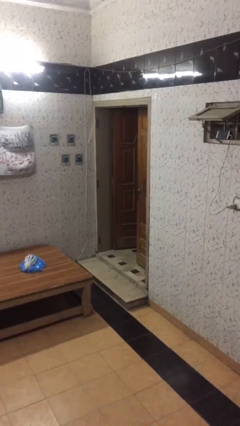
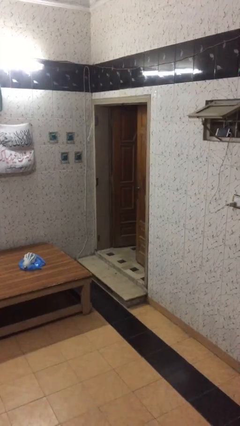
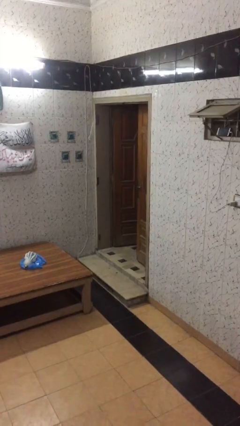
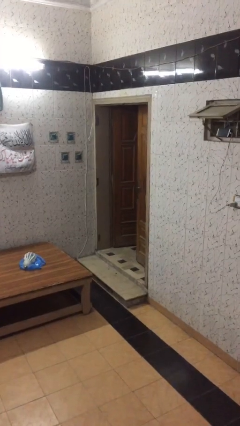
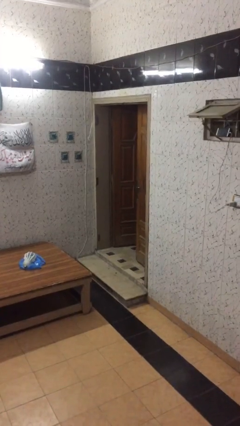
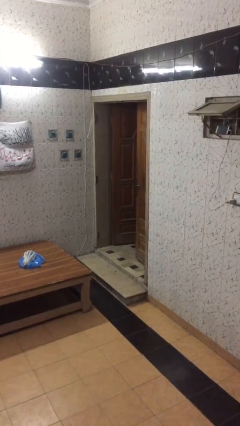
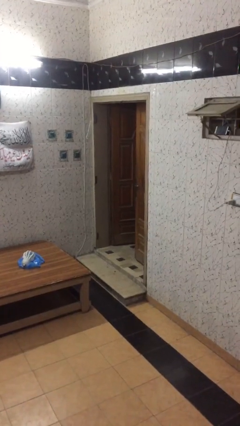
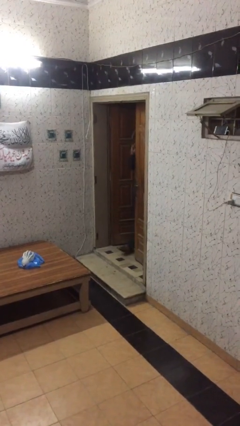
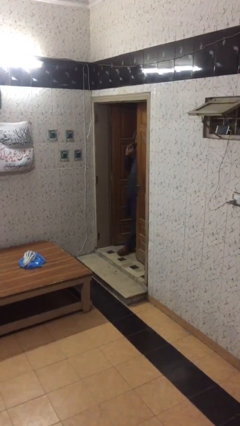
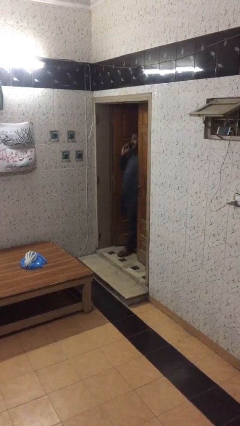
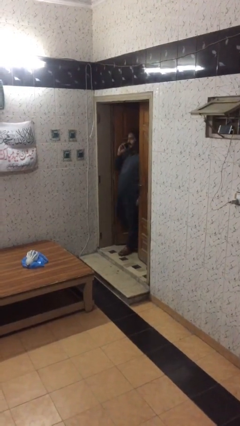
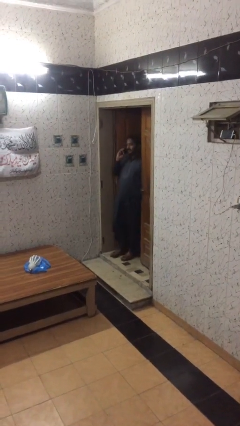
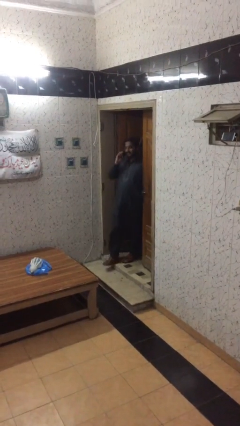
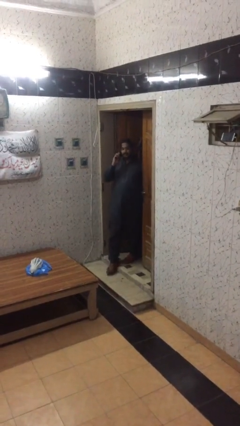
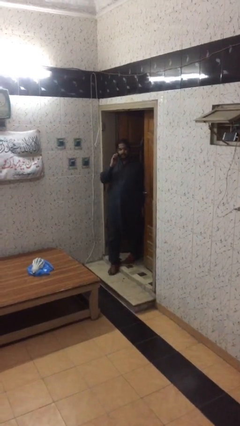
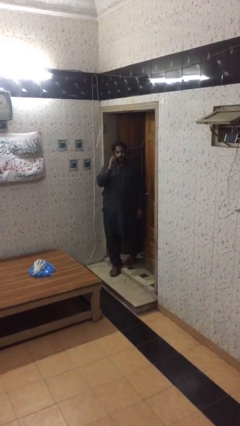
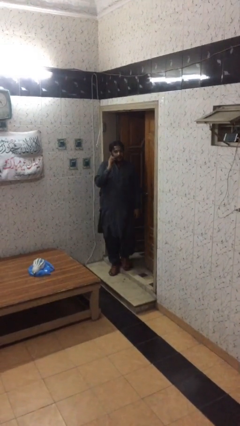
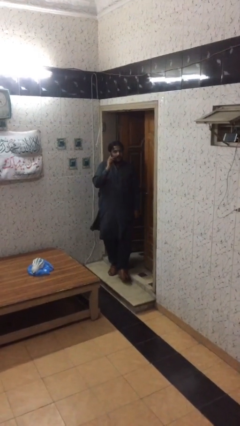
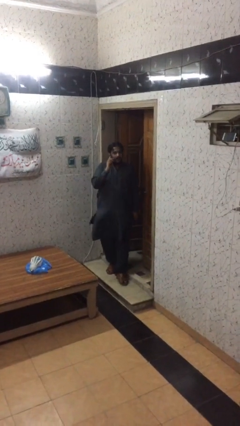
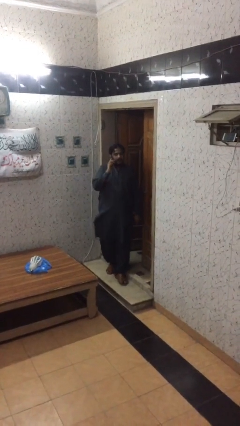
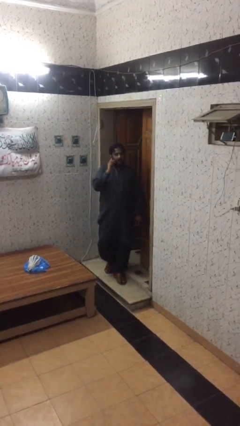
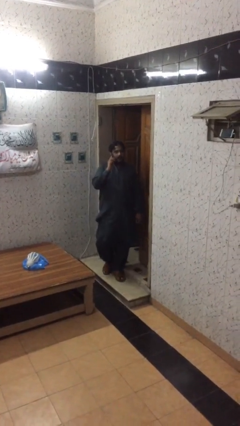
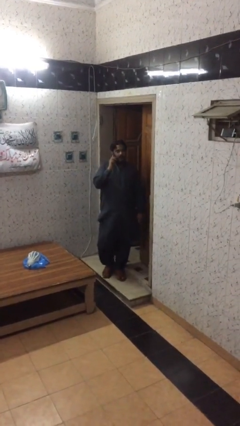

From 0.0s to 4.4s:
person enters scene through structure

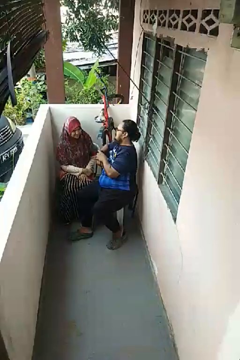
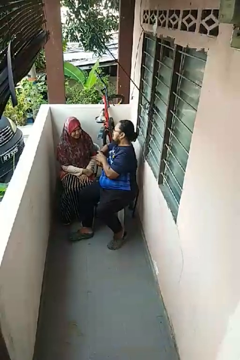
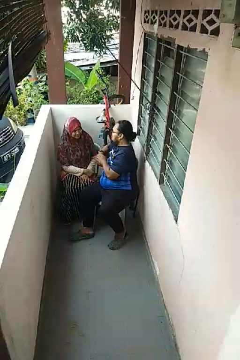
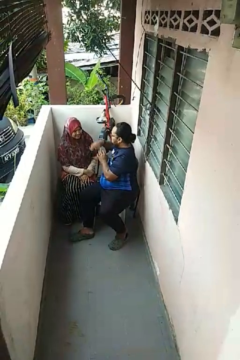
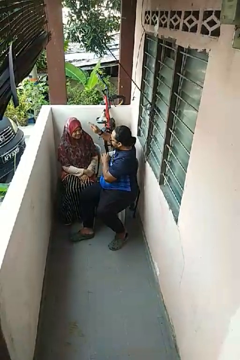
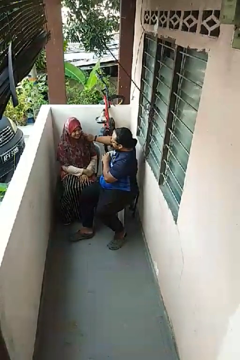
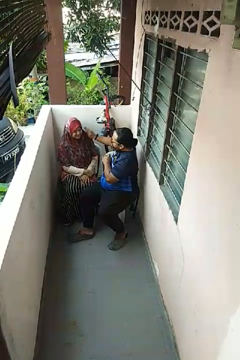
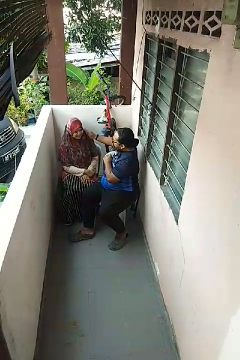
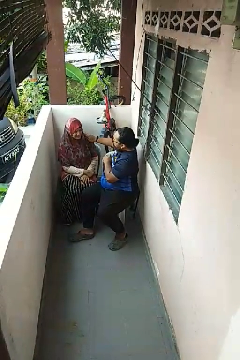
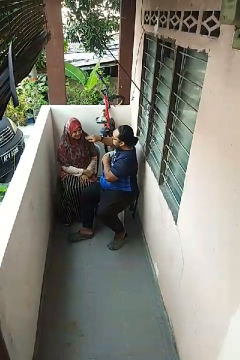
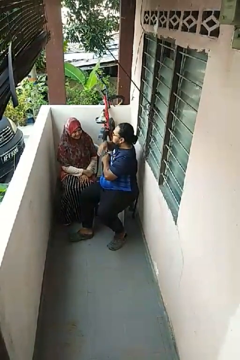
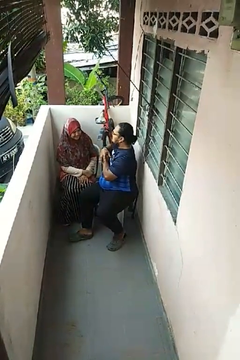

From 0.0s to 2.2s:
person pounds shoulders of person

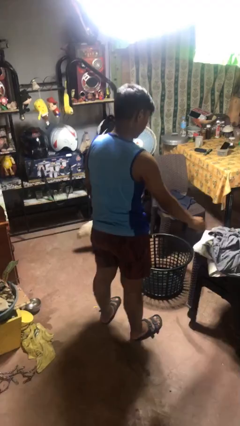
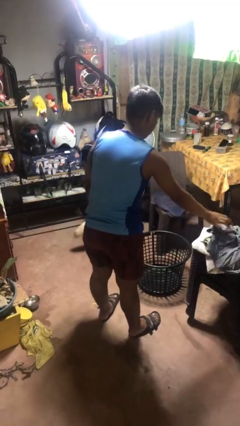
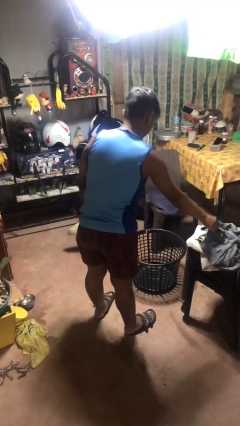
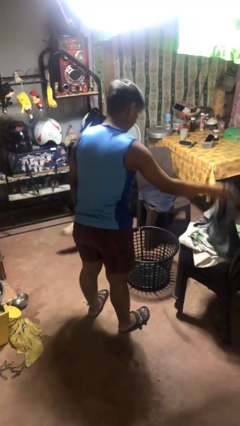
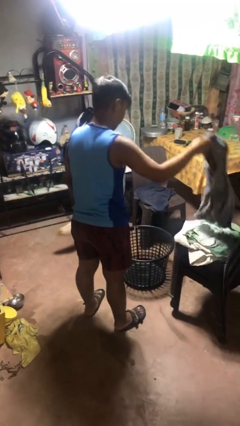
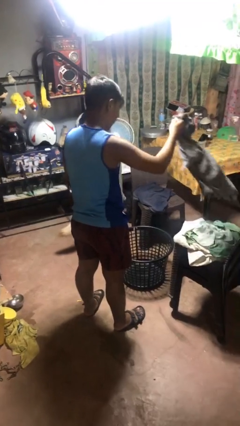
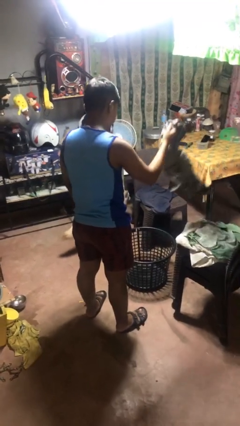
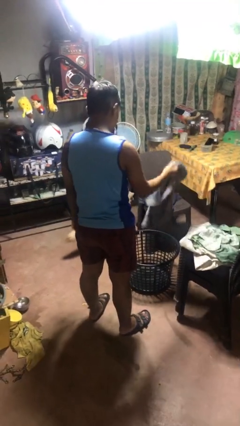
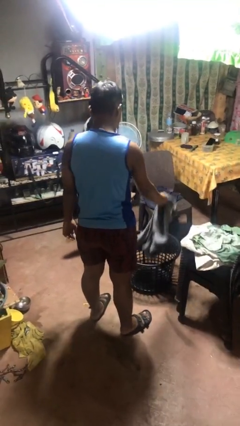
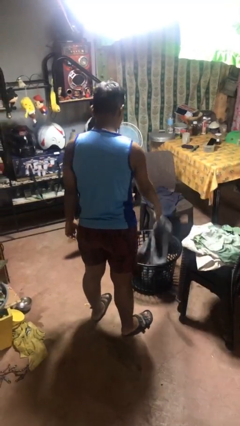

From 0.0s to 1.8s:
person puts object into basket

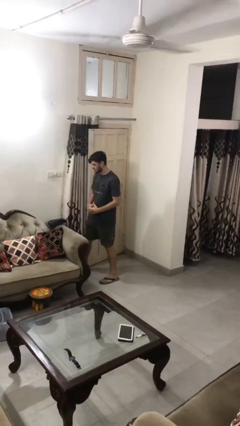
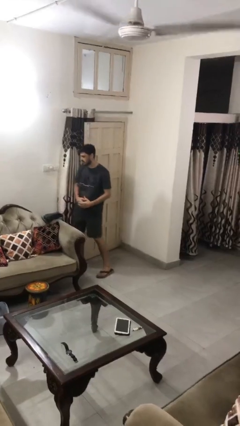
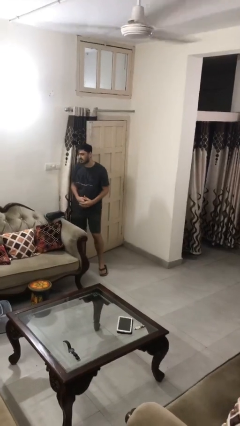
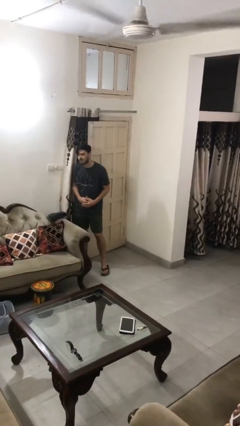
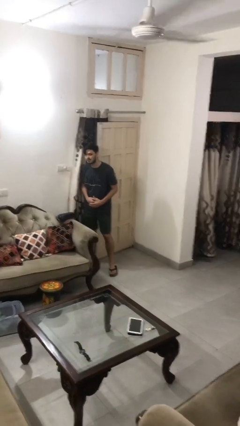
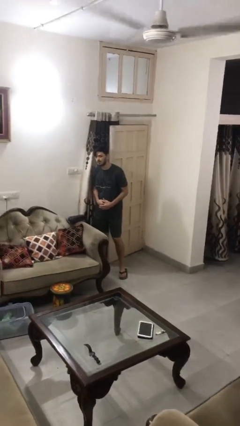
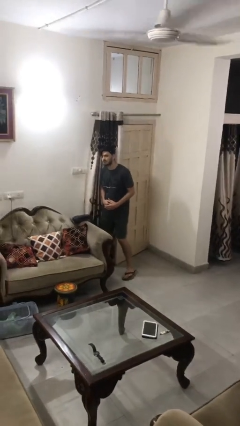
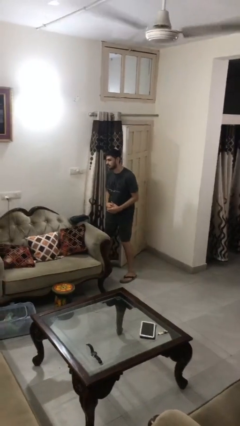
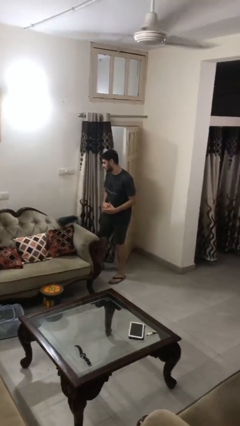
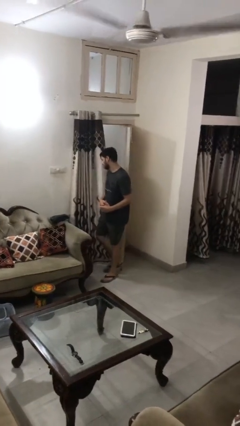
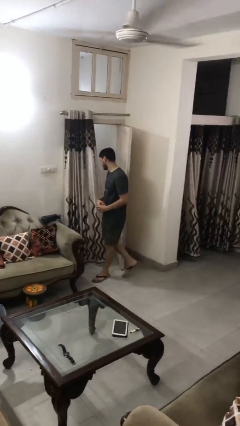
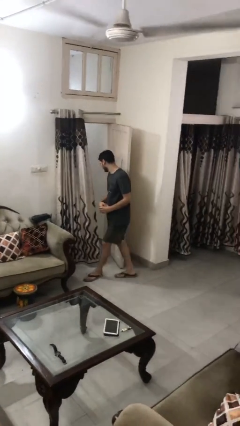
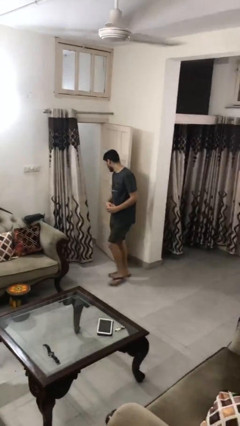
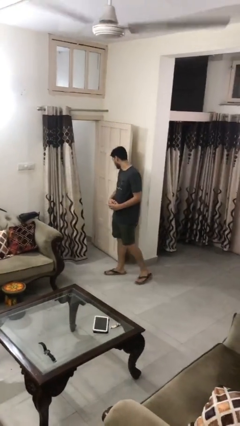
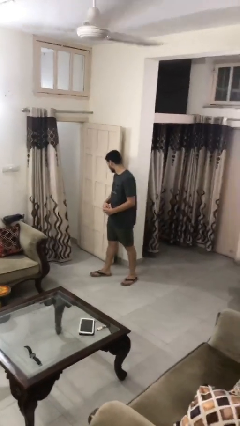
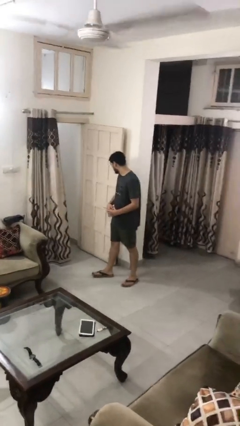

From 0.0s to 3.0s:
person opens facility door

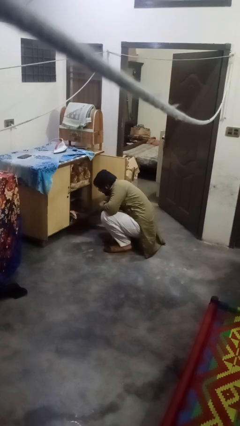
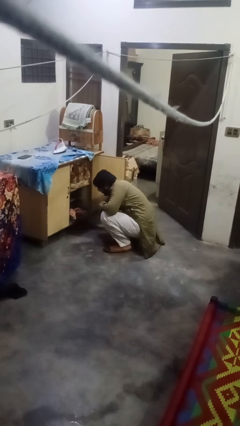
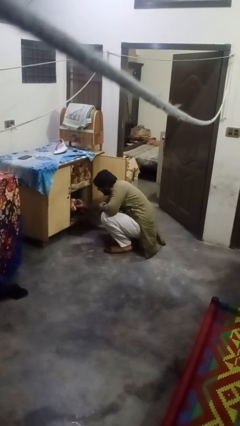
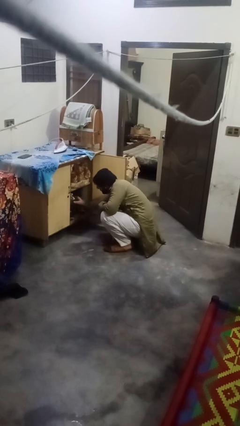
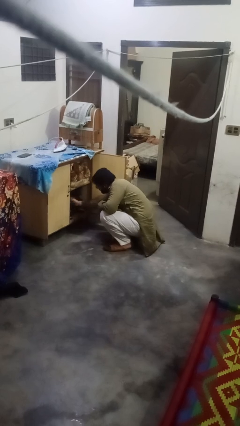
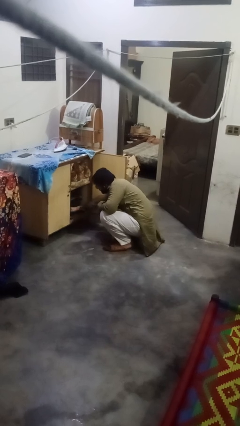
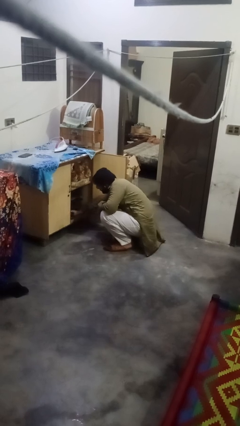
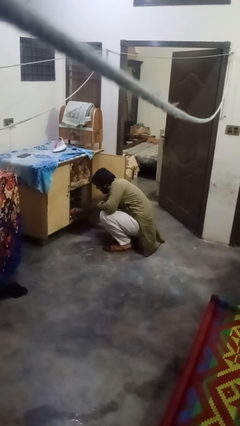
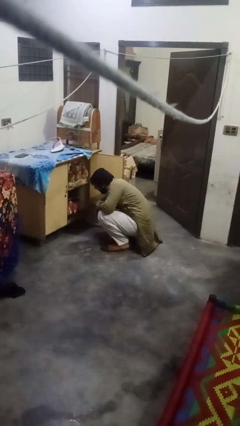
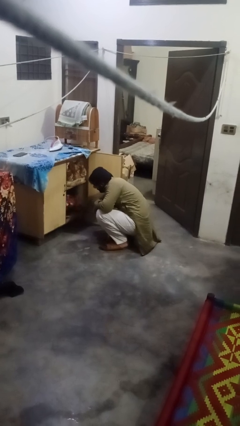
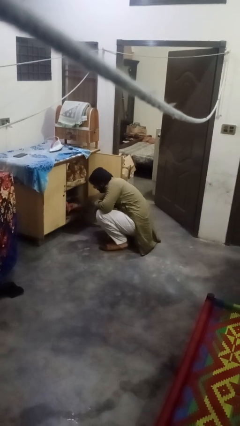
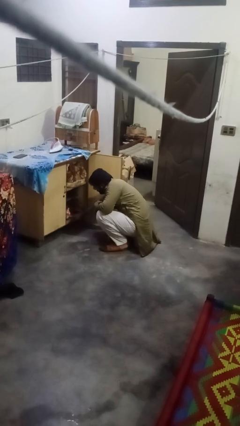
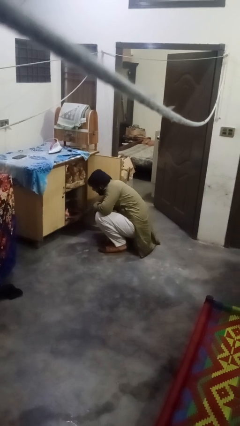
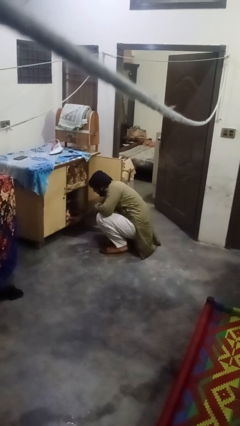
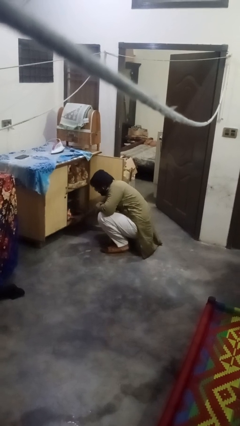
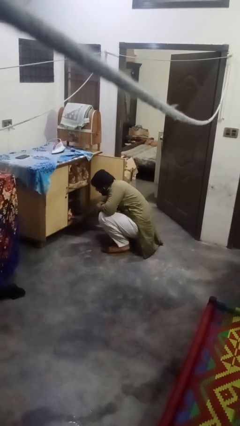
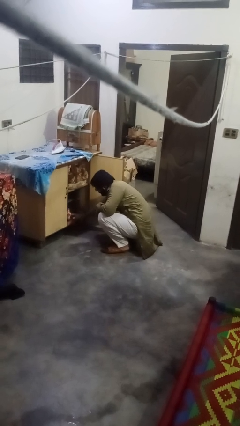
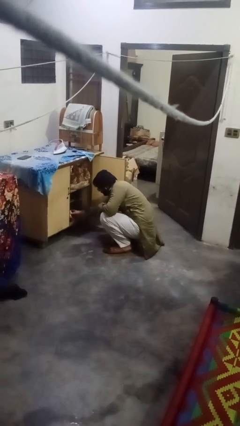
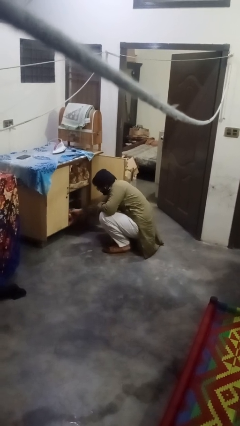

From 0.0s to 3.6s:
person searches in cabinet

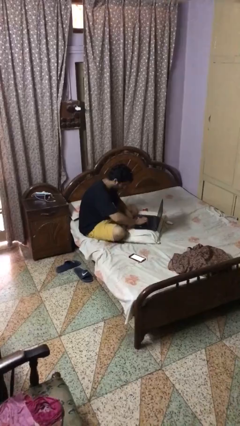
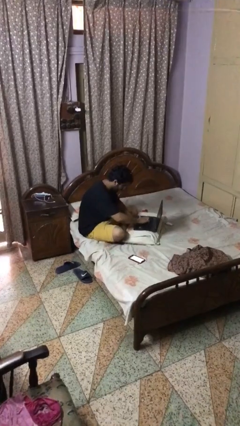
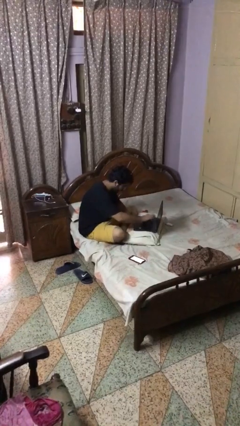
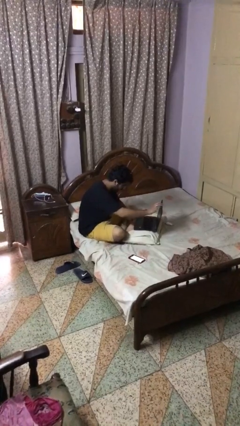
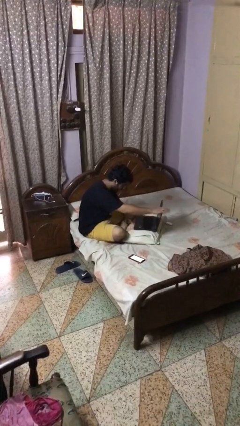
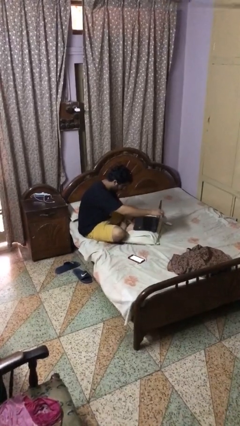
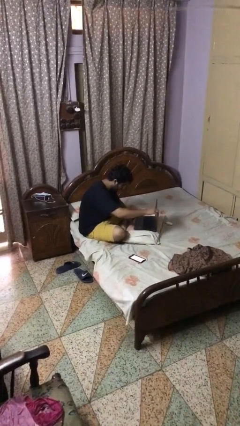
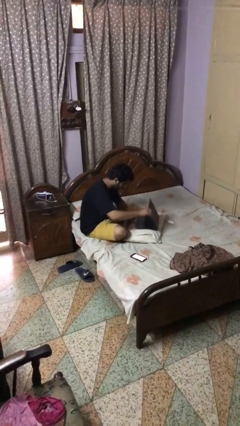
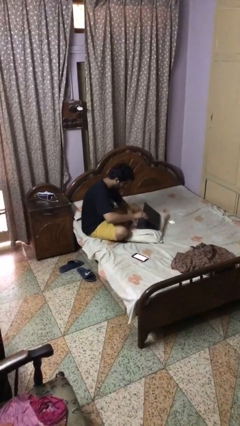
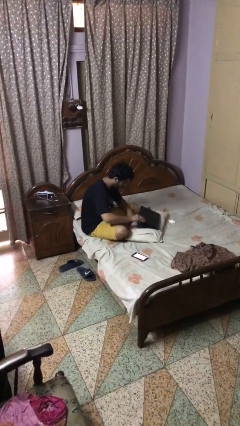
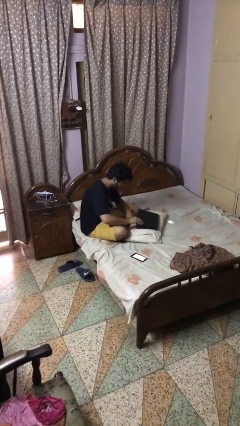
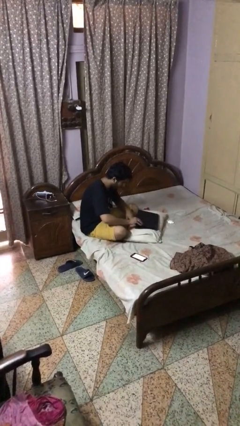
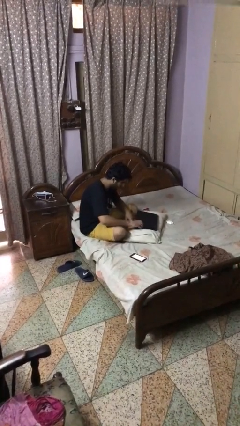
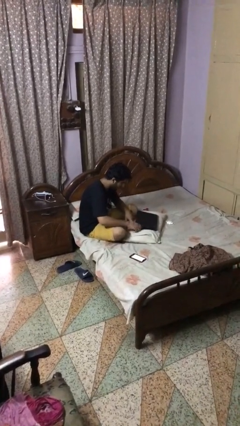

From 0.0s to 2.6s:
person closes laptop
